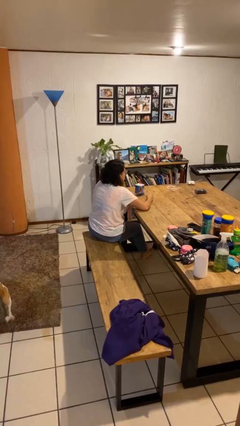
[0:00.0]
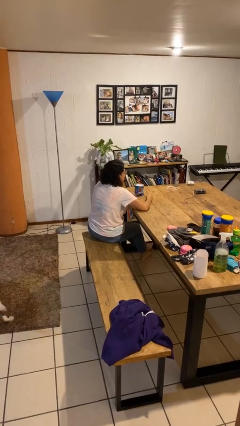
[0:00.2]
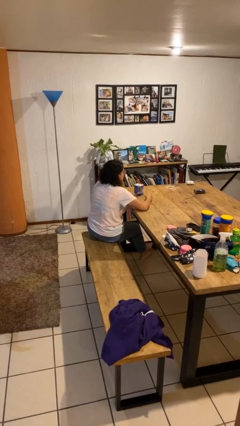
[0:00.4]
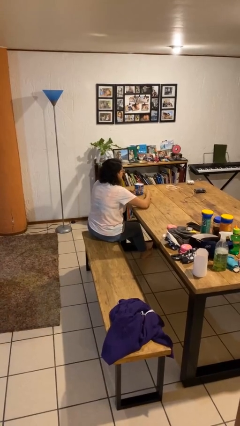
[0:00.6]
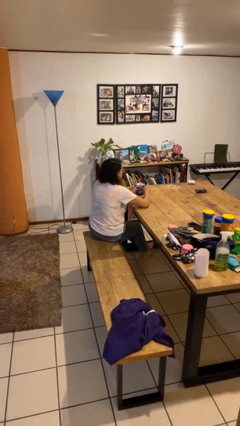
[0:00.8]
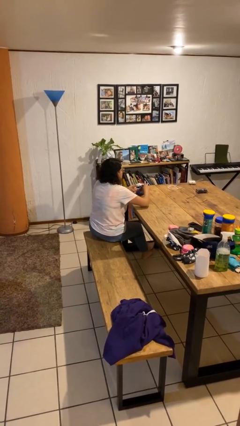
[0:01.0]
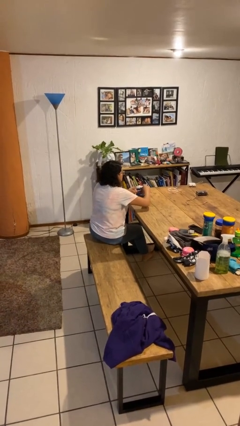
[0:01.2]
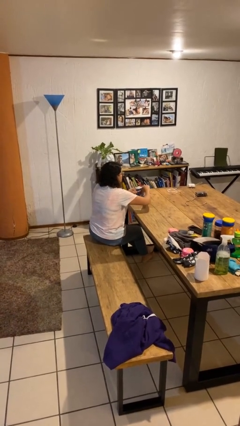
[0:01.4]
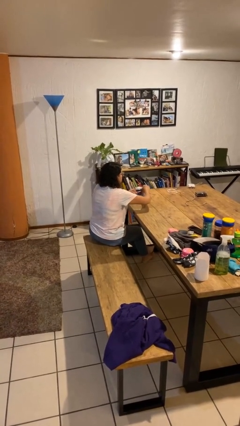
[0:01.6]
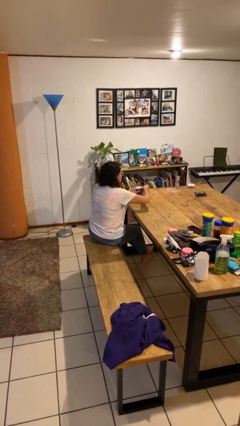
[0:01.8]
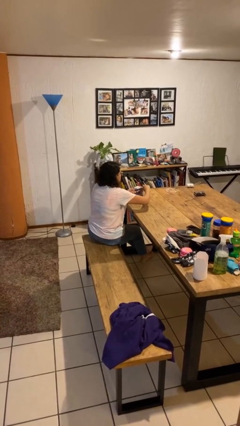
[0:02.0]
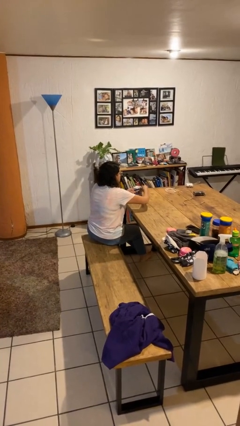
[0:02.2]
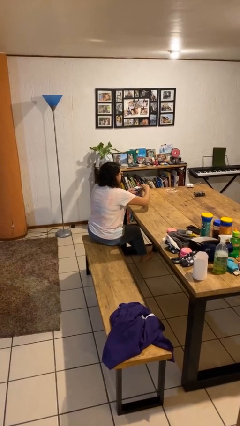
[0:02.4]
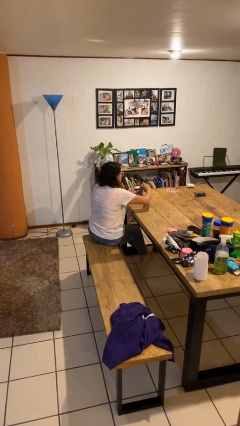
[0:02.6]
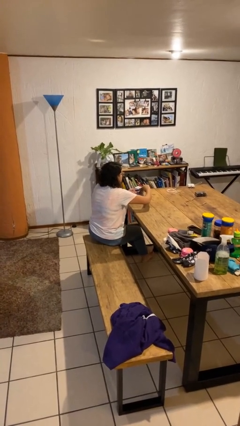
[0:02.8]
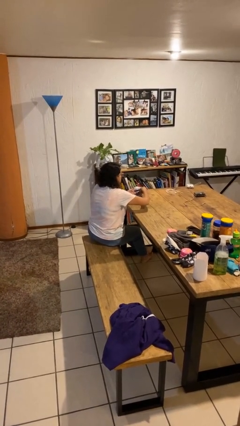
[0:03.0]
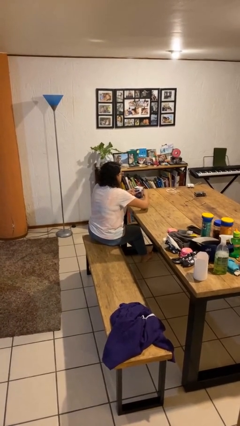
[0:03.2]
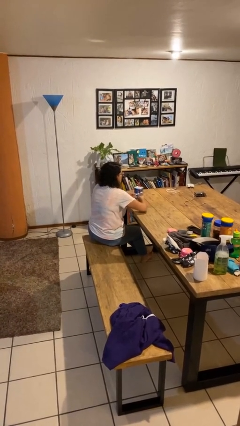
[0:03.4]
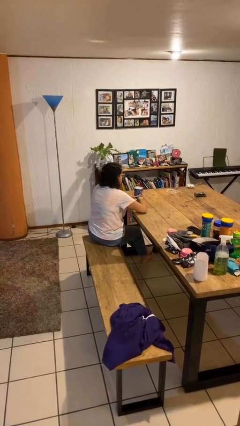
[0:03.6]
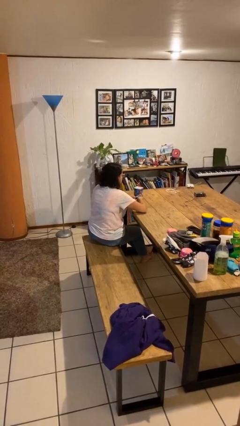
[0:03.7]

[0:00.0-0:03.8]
person opens can with can opener

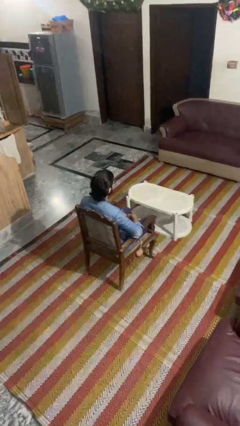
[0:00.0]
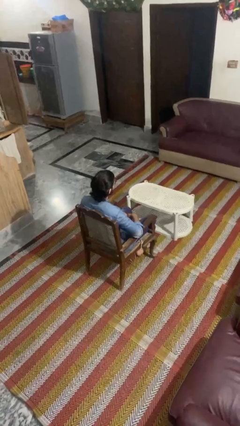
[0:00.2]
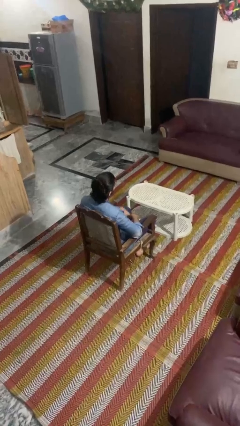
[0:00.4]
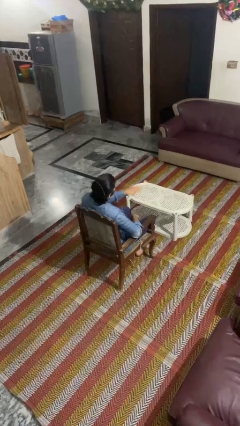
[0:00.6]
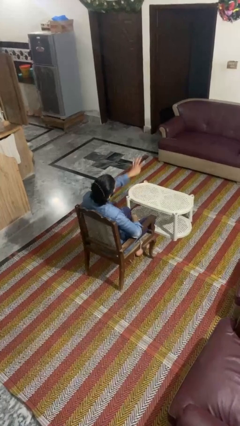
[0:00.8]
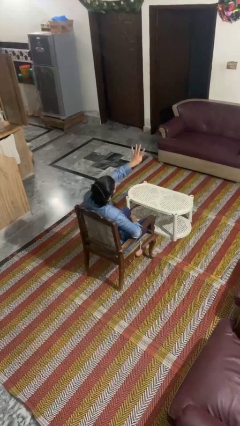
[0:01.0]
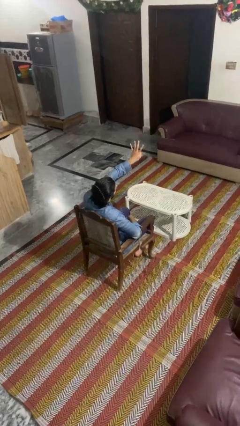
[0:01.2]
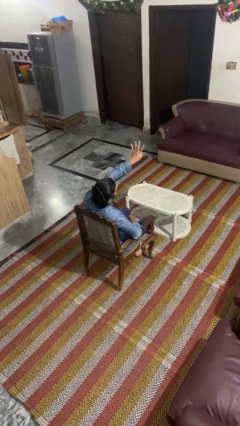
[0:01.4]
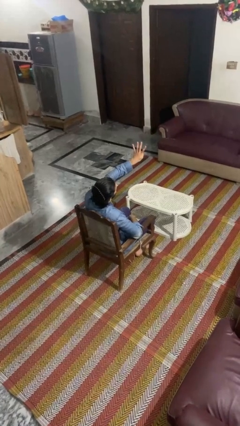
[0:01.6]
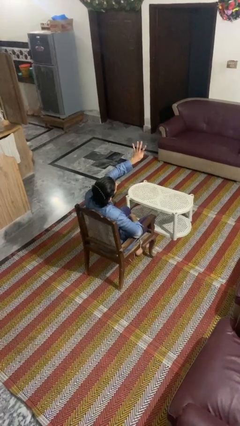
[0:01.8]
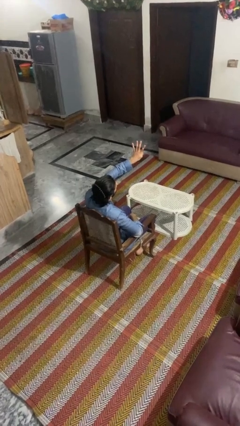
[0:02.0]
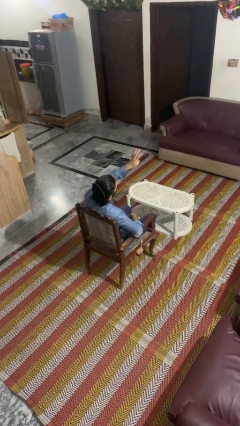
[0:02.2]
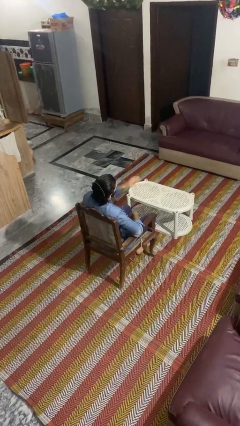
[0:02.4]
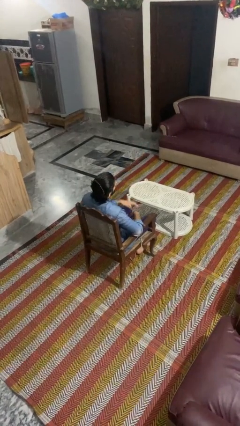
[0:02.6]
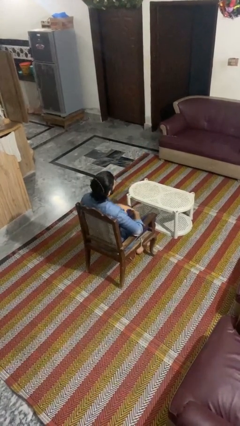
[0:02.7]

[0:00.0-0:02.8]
person gestures number four

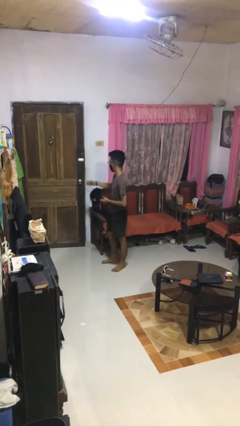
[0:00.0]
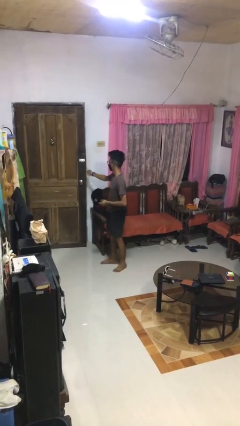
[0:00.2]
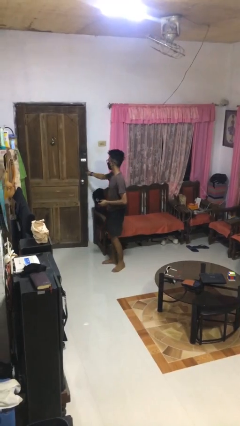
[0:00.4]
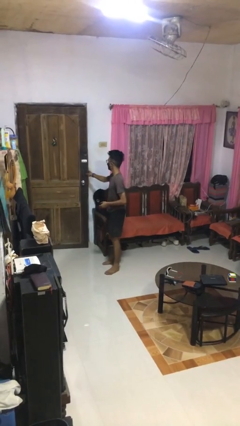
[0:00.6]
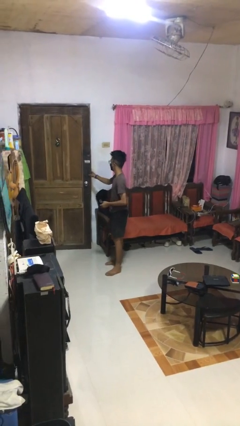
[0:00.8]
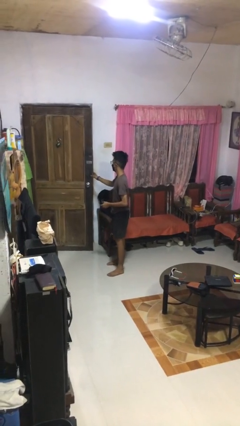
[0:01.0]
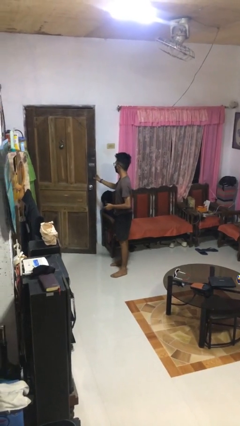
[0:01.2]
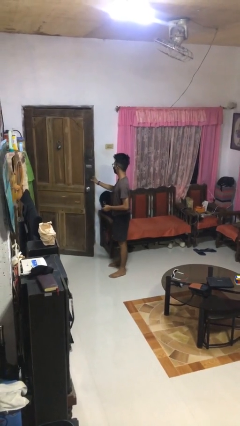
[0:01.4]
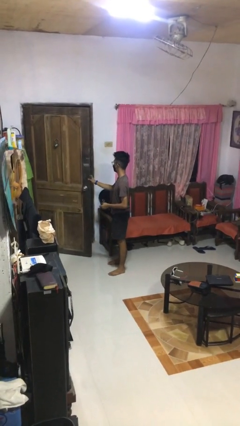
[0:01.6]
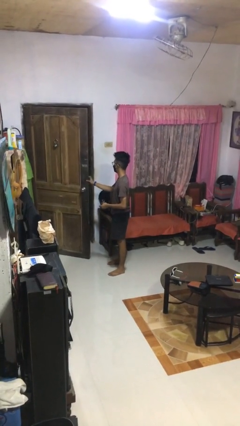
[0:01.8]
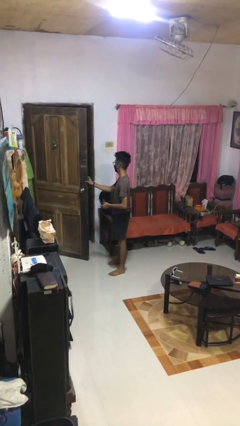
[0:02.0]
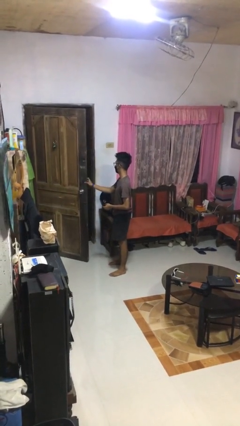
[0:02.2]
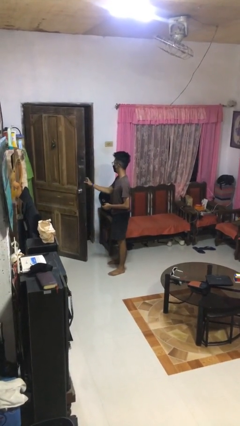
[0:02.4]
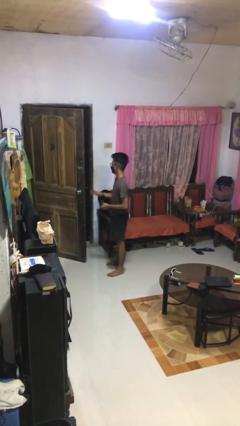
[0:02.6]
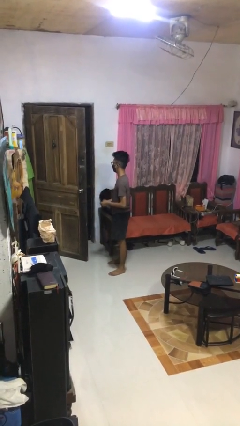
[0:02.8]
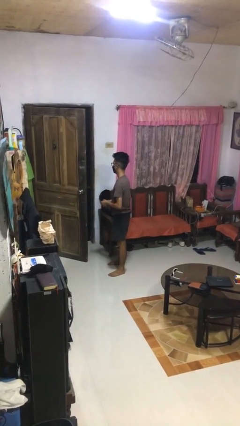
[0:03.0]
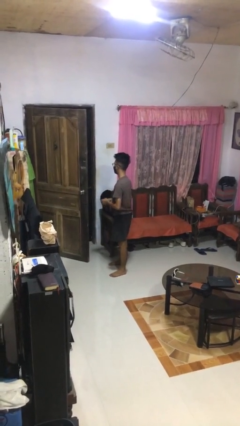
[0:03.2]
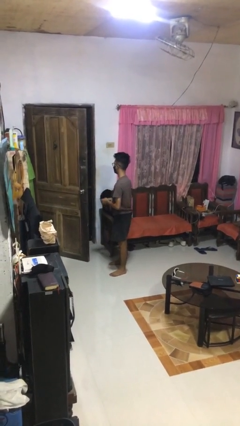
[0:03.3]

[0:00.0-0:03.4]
person opens facility door

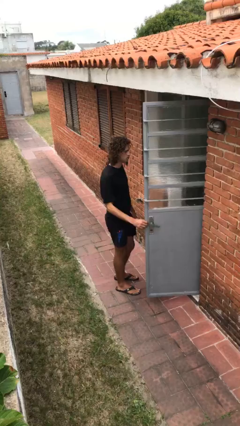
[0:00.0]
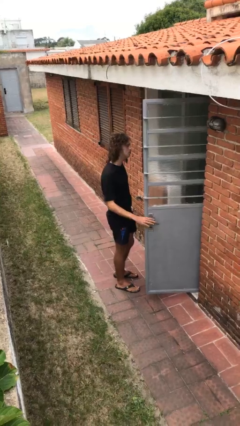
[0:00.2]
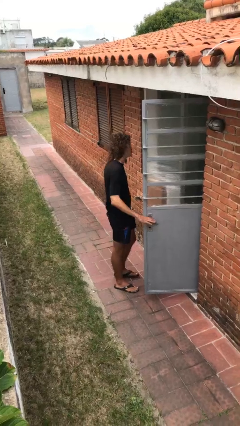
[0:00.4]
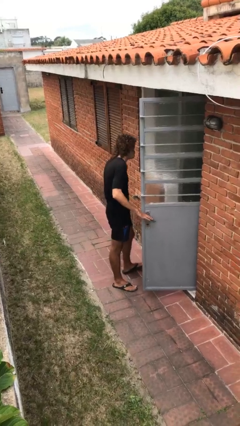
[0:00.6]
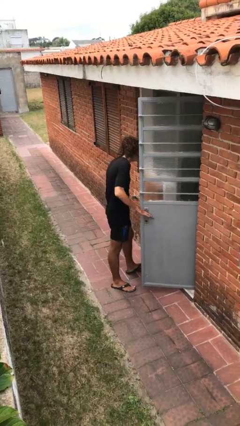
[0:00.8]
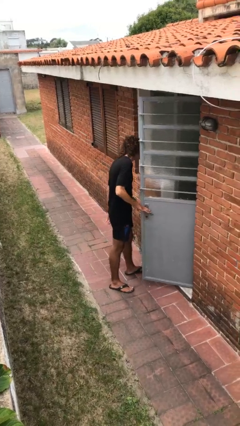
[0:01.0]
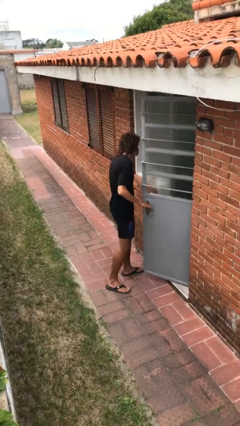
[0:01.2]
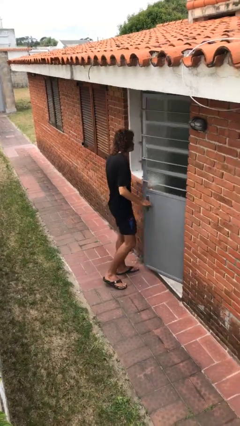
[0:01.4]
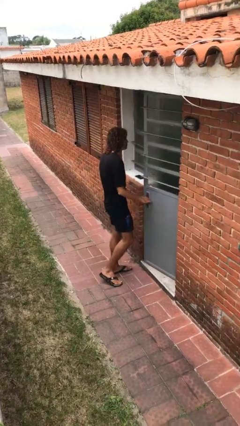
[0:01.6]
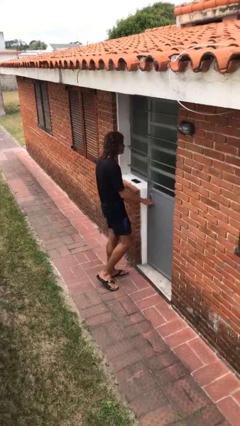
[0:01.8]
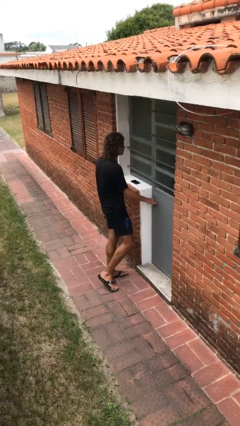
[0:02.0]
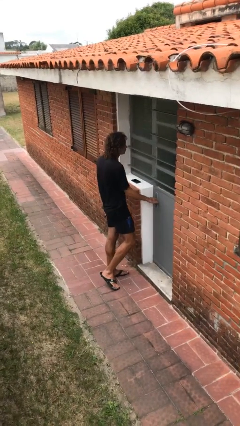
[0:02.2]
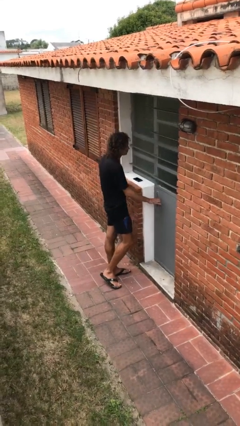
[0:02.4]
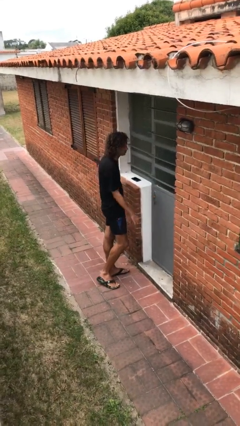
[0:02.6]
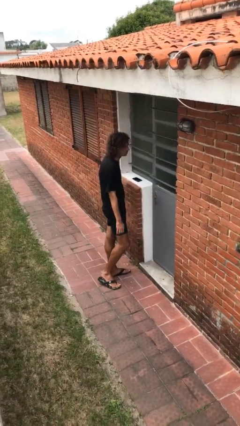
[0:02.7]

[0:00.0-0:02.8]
person closes facility door

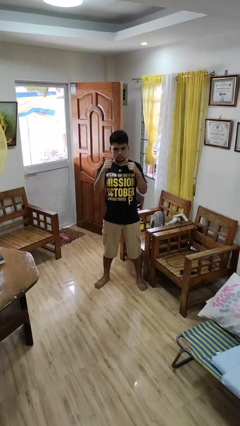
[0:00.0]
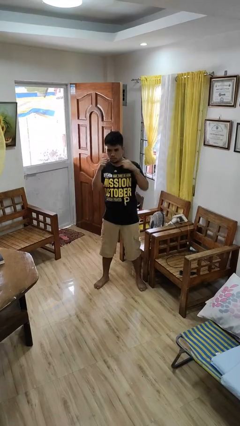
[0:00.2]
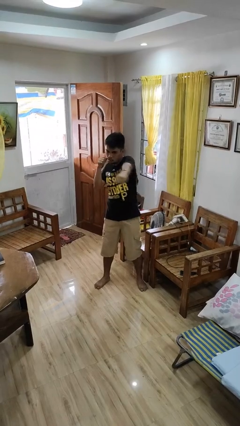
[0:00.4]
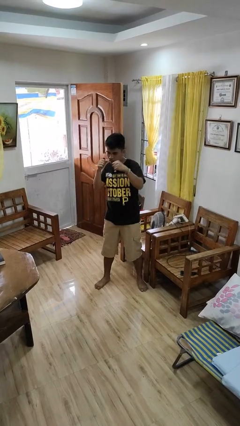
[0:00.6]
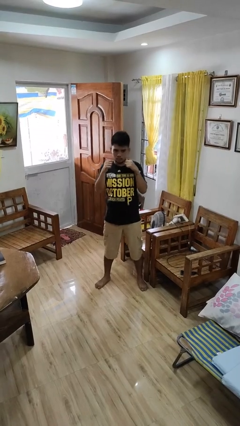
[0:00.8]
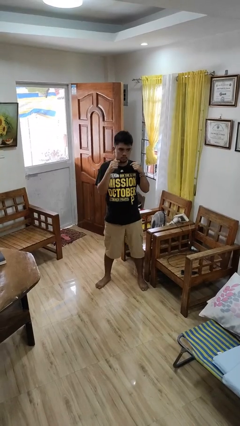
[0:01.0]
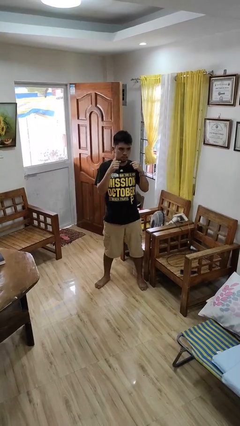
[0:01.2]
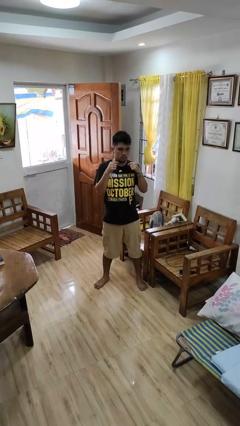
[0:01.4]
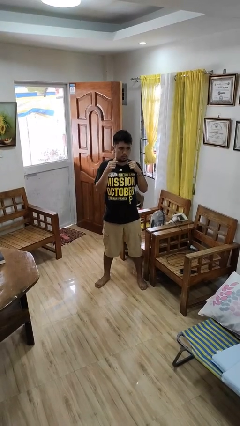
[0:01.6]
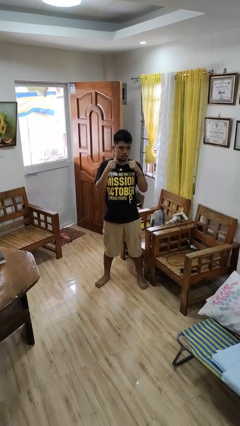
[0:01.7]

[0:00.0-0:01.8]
person punches

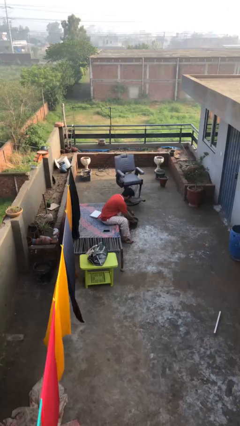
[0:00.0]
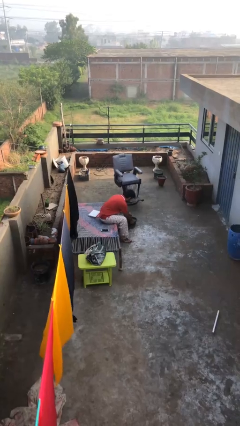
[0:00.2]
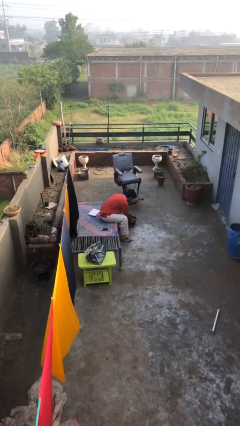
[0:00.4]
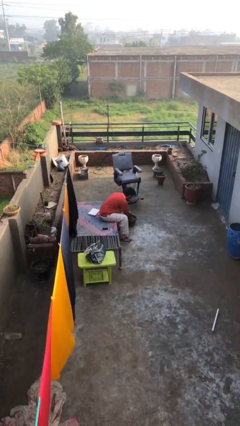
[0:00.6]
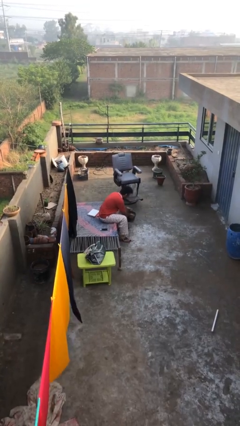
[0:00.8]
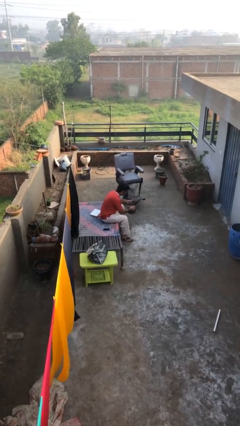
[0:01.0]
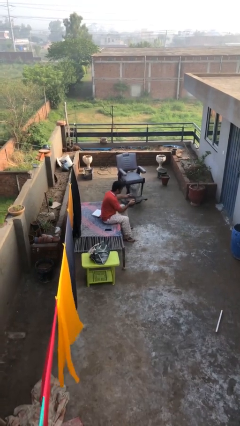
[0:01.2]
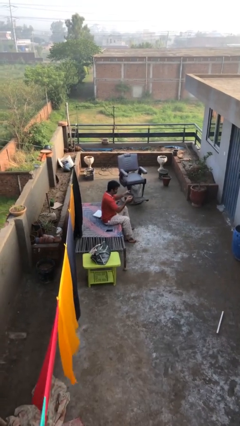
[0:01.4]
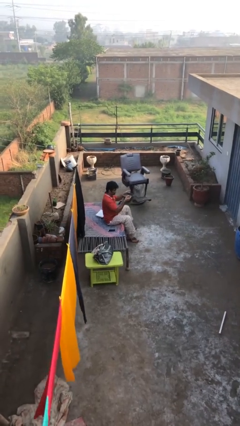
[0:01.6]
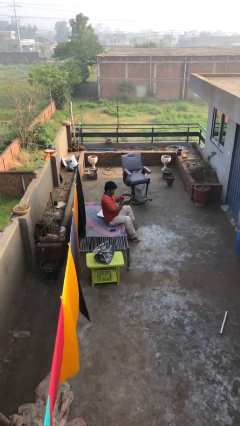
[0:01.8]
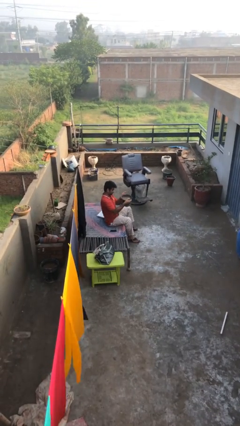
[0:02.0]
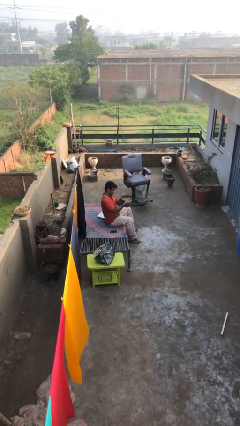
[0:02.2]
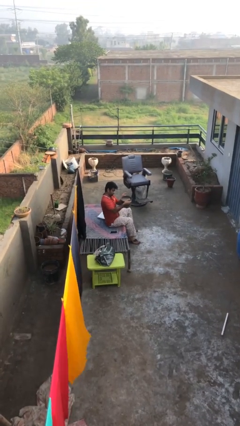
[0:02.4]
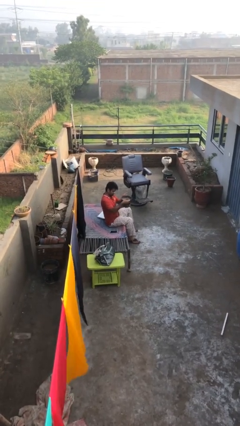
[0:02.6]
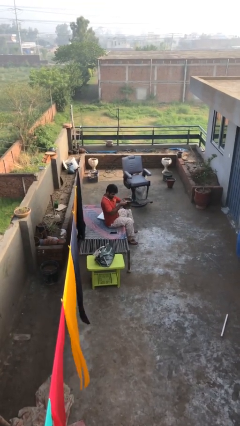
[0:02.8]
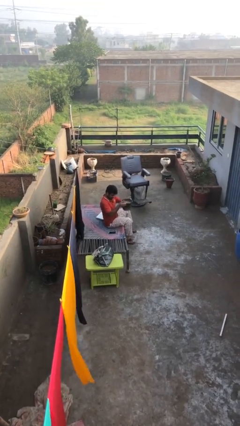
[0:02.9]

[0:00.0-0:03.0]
person picks up object from floor
